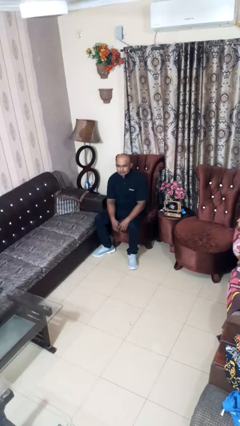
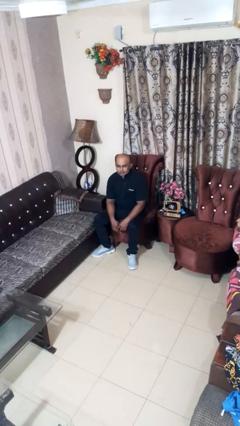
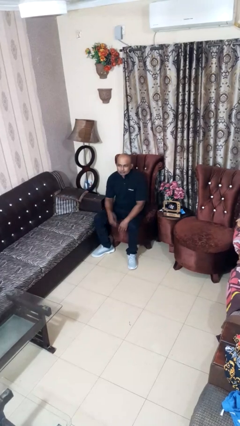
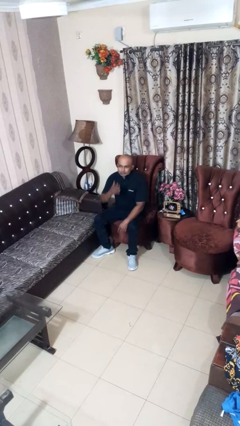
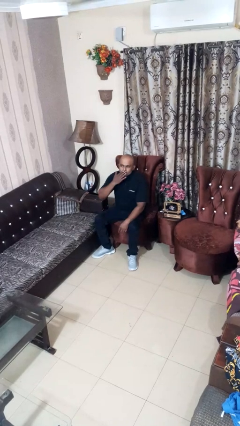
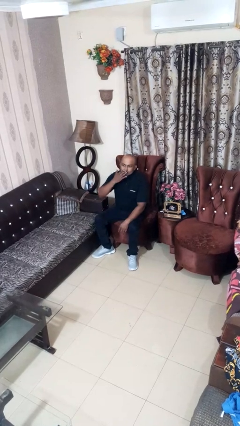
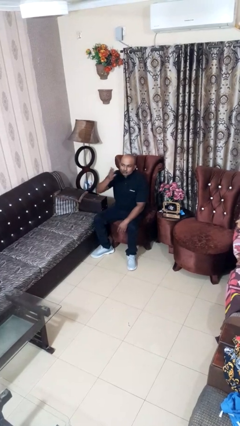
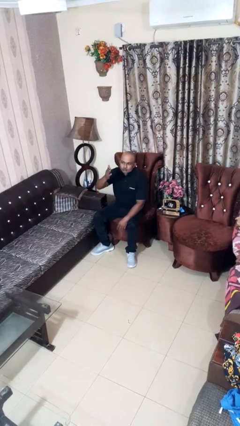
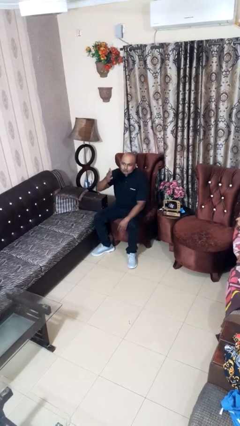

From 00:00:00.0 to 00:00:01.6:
person gestures blow kiss

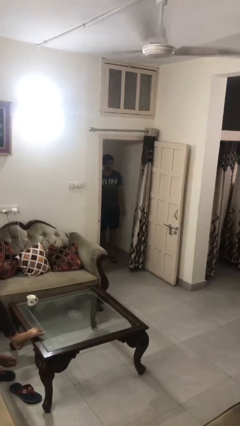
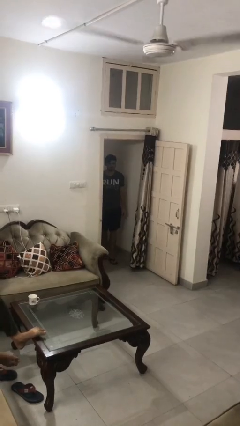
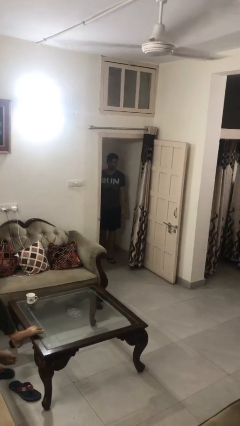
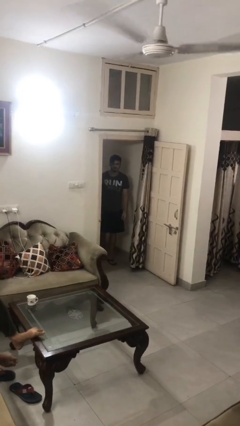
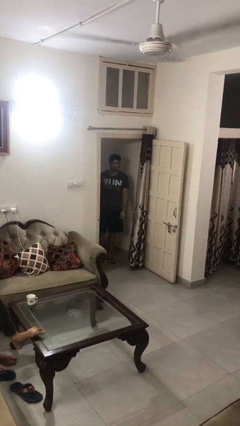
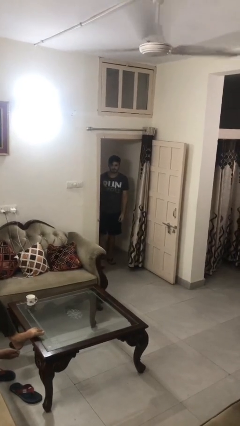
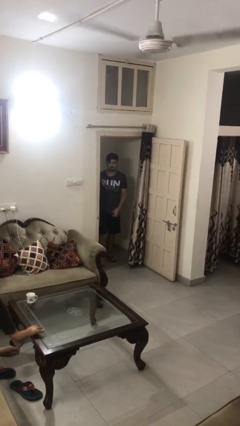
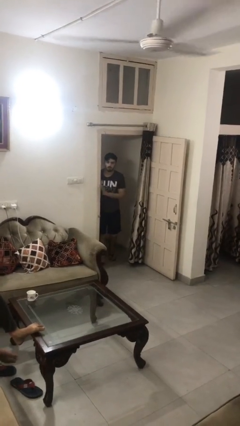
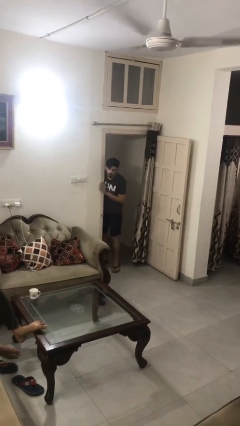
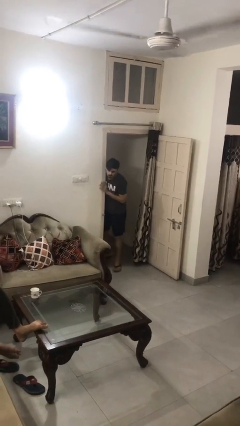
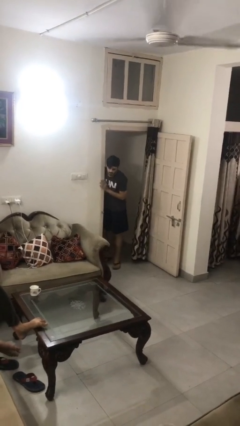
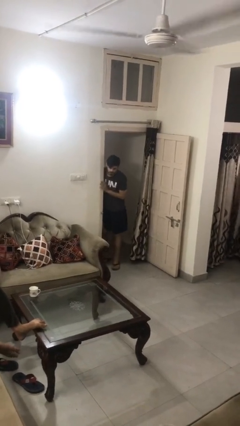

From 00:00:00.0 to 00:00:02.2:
person bumps into wall

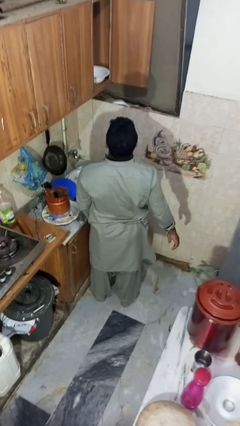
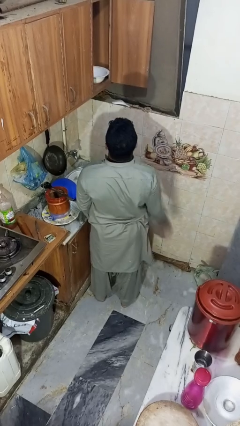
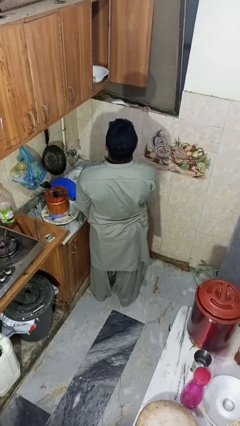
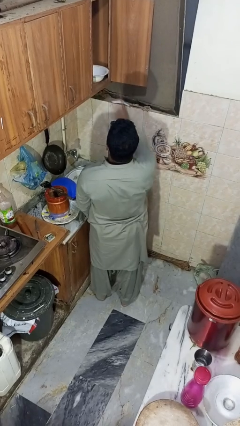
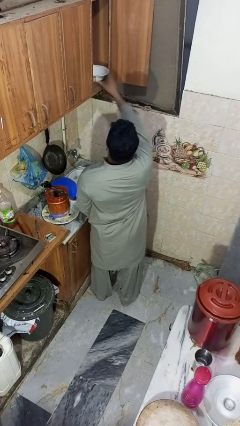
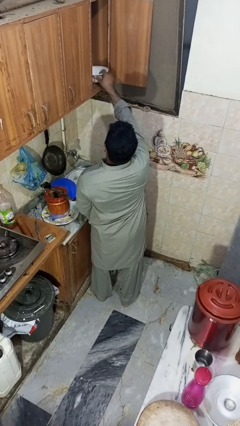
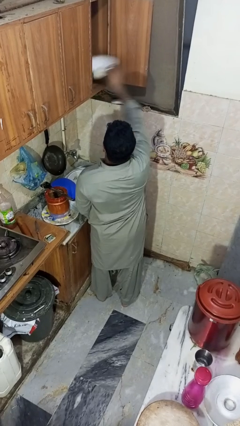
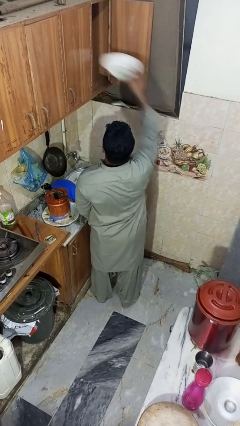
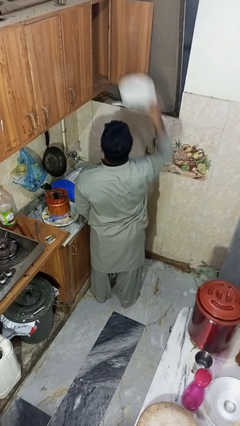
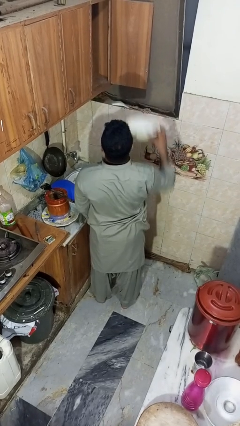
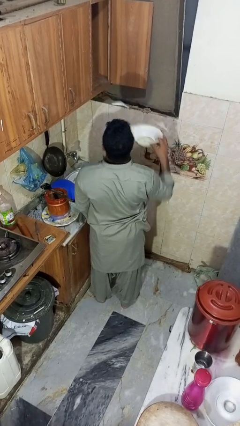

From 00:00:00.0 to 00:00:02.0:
person takes object from cabinet

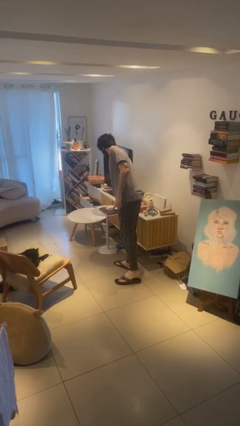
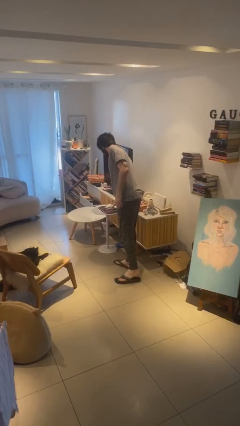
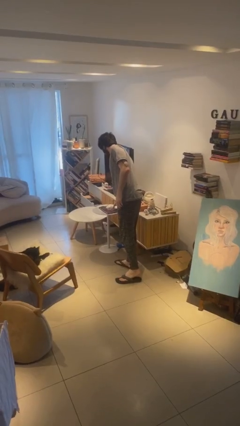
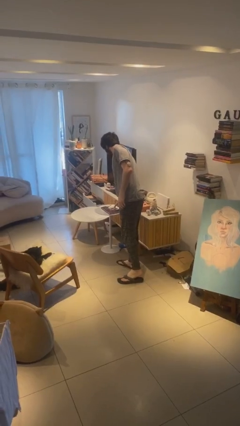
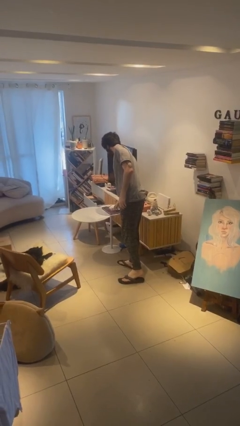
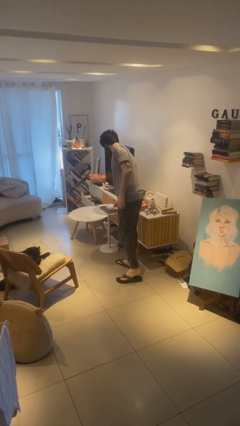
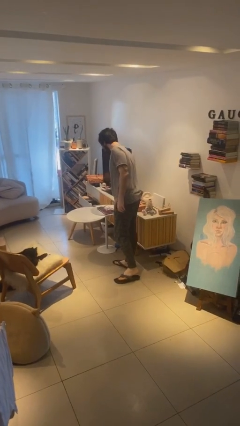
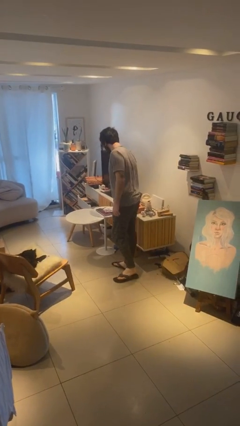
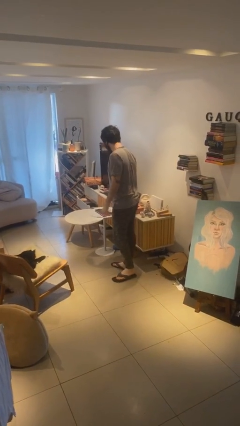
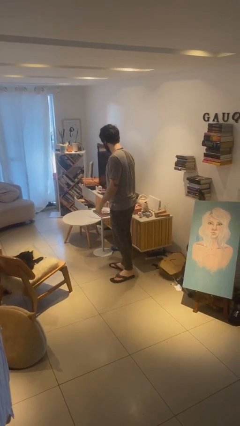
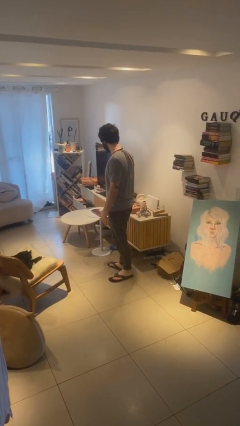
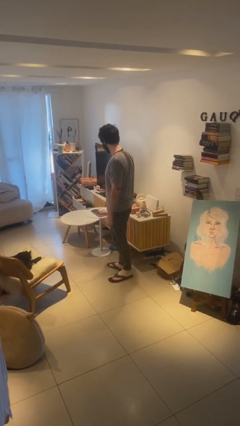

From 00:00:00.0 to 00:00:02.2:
person puts down object on table

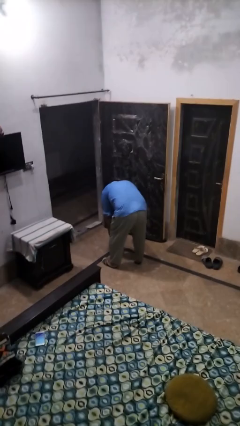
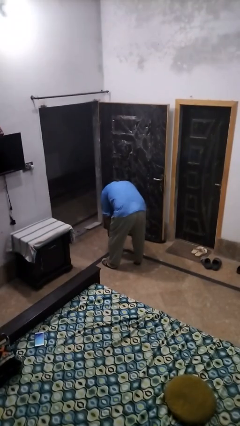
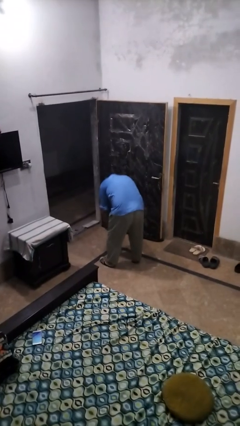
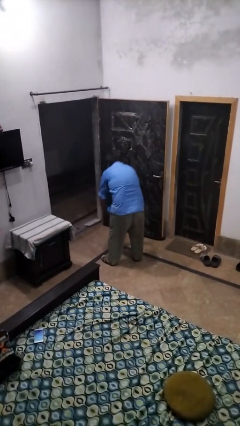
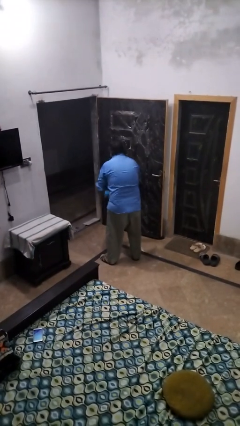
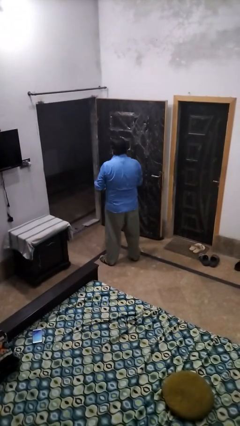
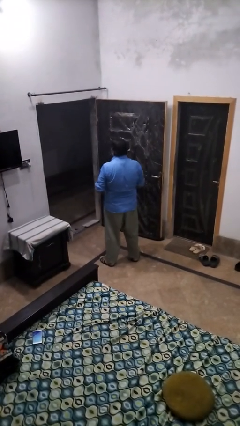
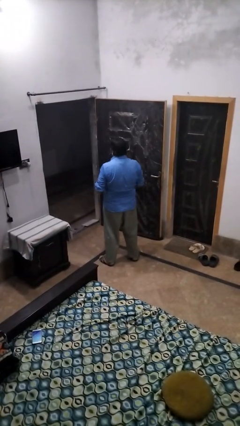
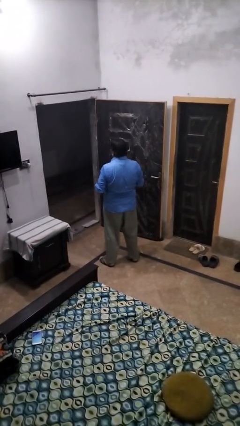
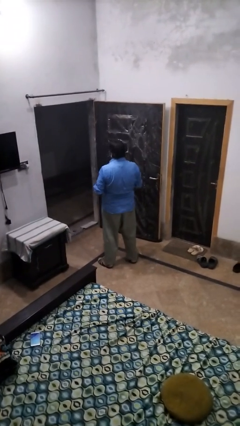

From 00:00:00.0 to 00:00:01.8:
person catches dropped object

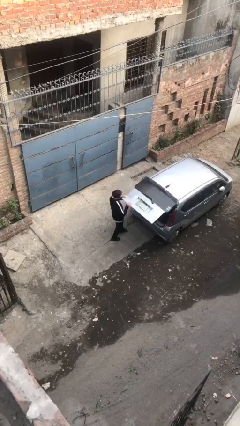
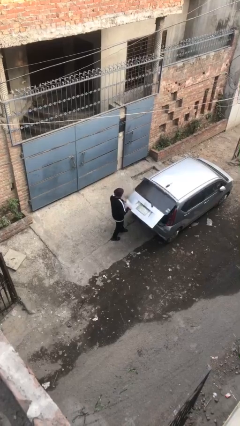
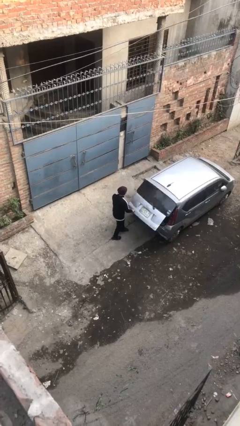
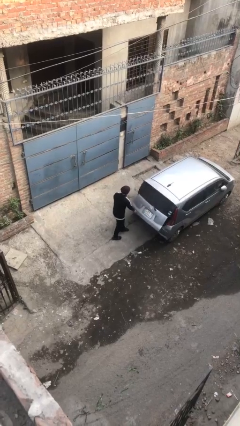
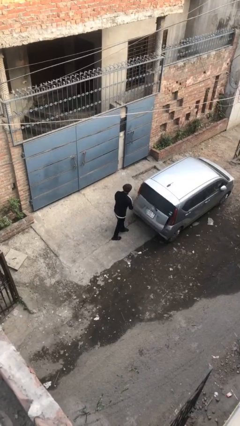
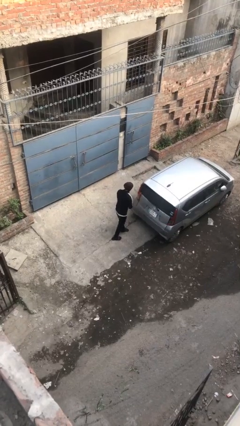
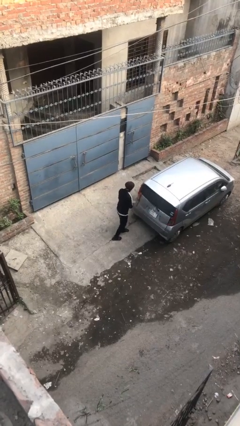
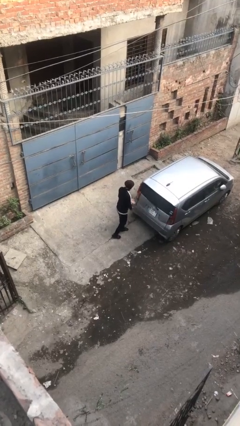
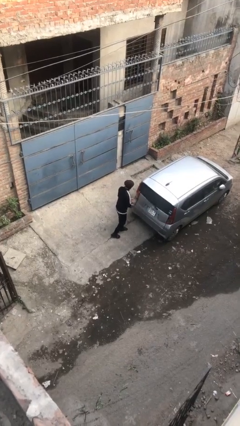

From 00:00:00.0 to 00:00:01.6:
person closes car trunk

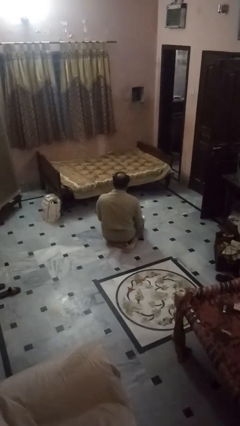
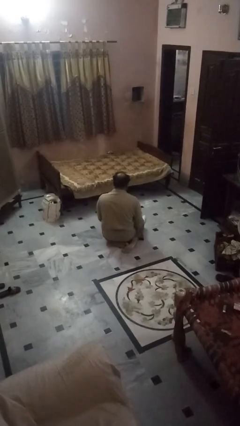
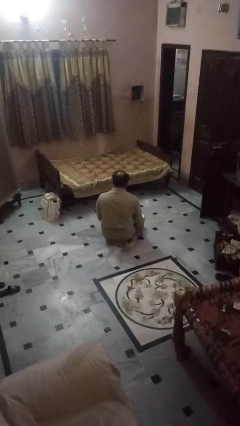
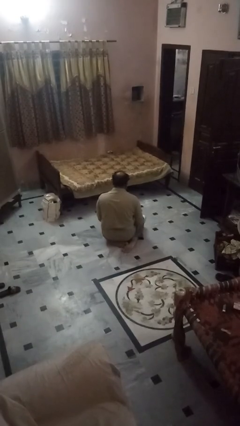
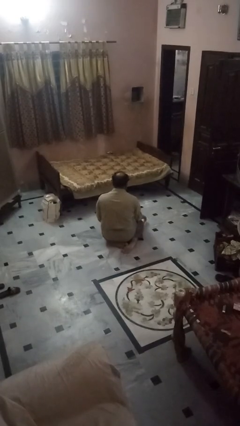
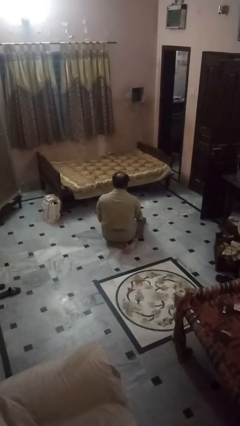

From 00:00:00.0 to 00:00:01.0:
person picks up object from floor

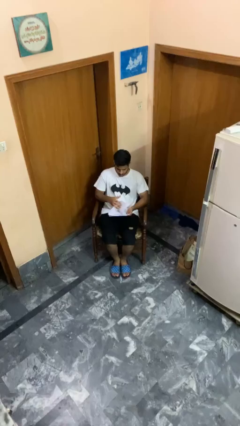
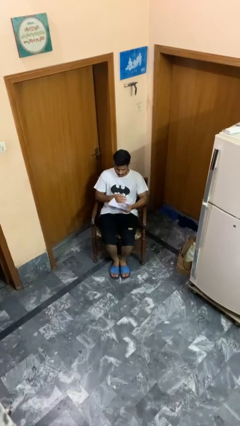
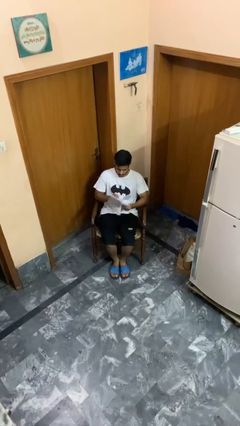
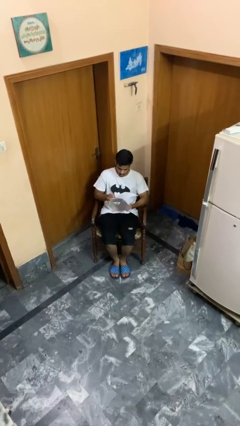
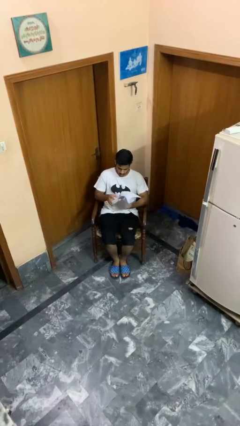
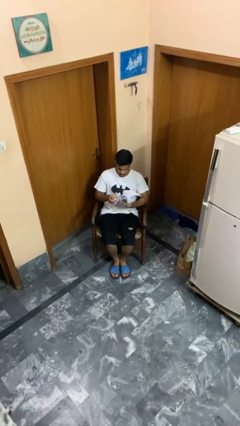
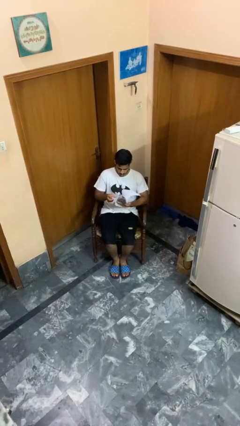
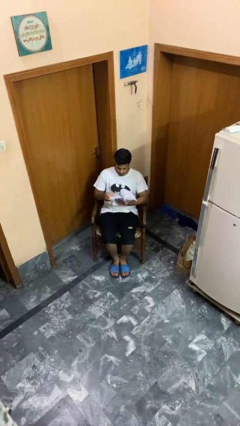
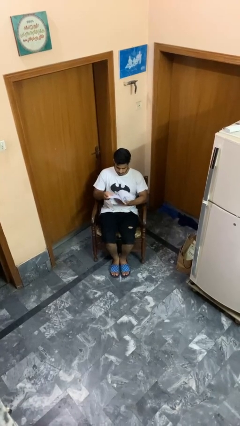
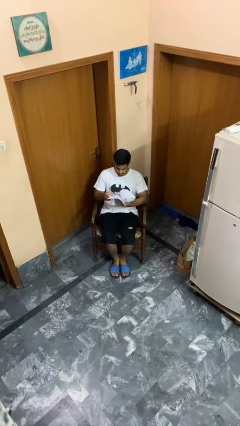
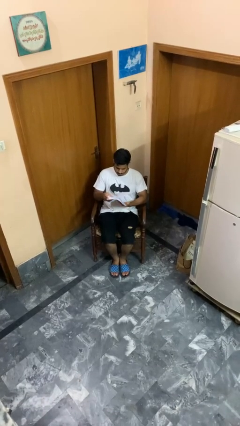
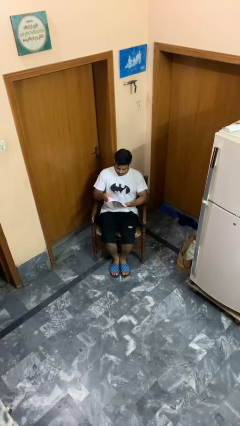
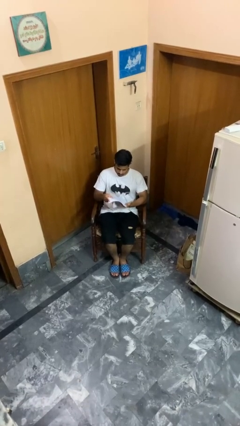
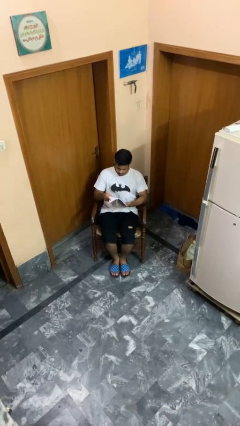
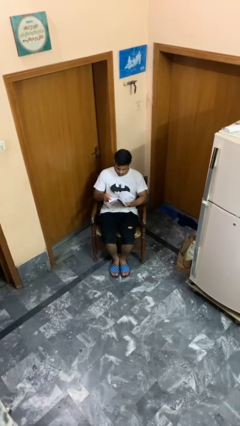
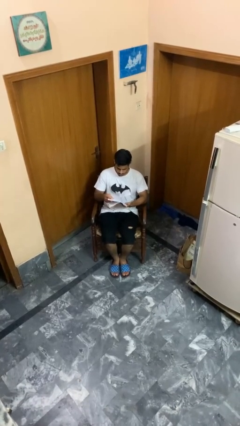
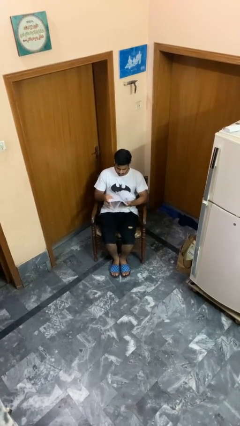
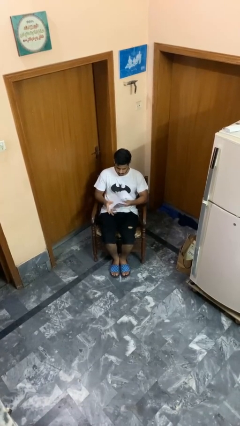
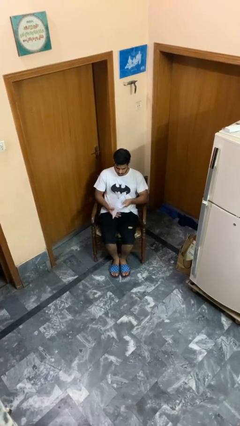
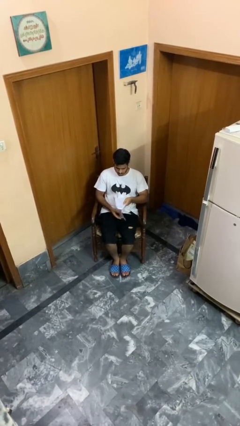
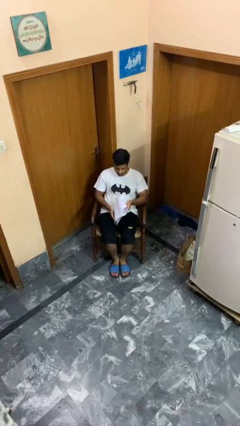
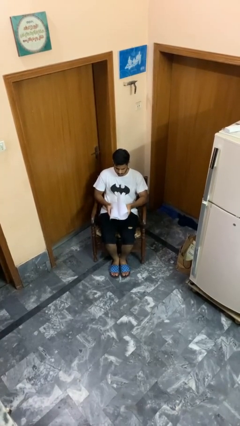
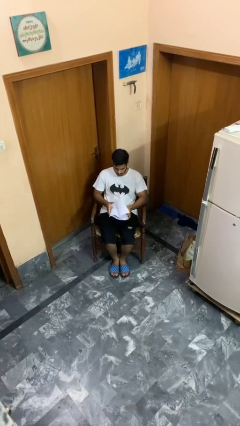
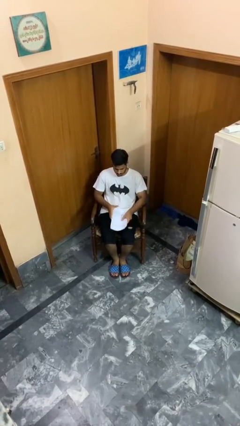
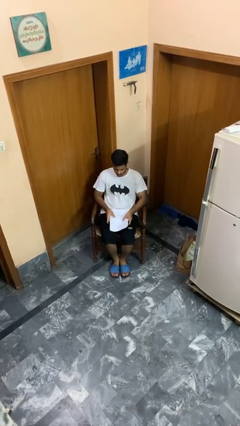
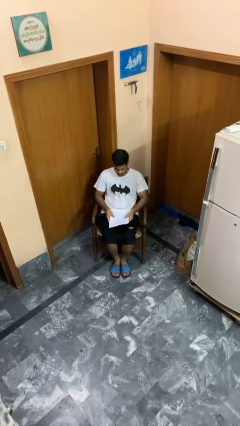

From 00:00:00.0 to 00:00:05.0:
person reads magazine
